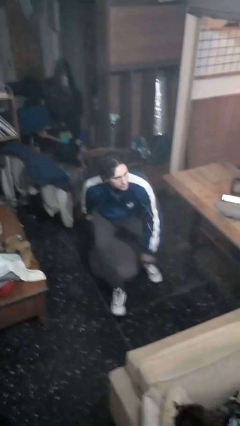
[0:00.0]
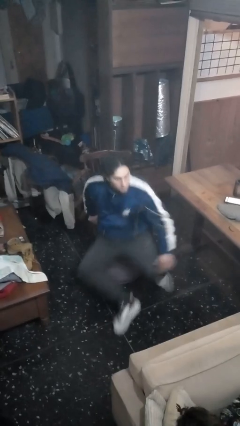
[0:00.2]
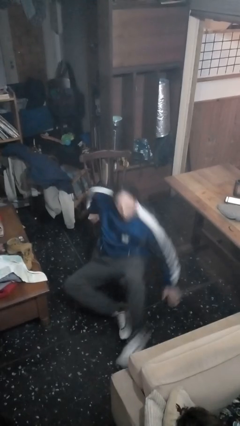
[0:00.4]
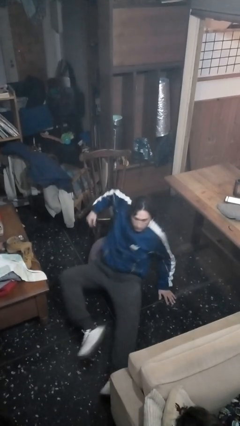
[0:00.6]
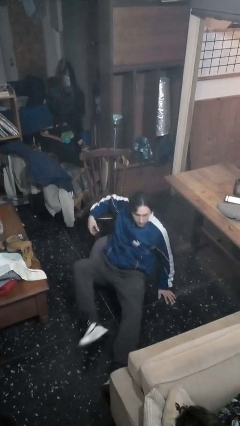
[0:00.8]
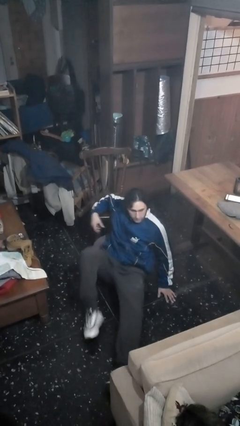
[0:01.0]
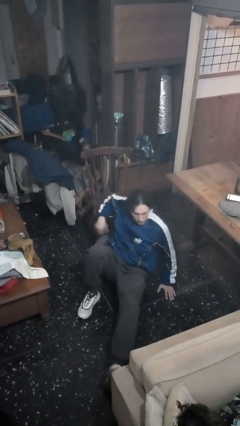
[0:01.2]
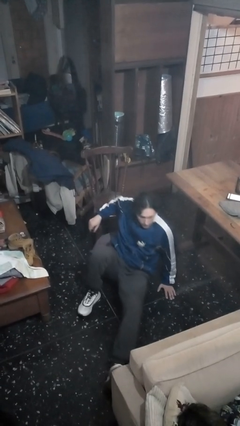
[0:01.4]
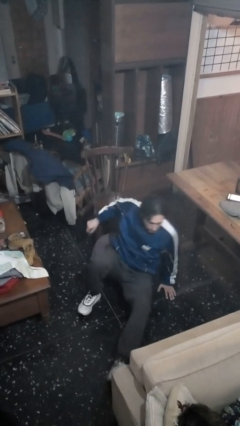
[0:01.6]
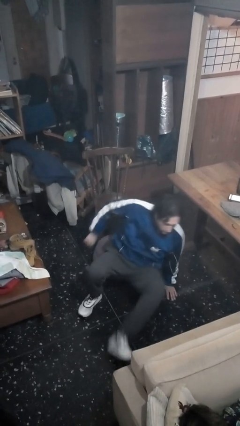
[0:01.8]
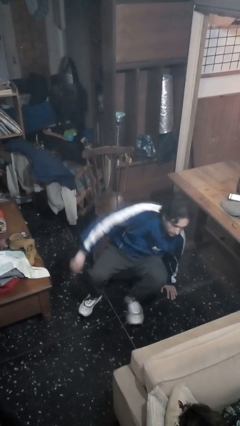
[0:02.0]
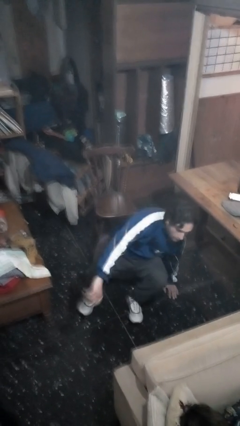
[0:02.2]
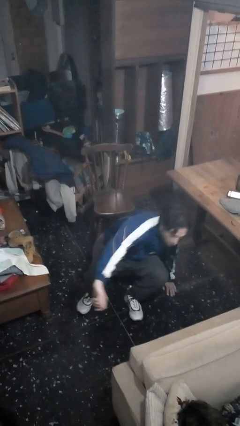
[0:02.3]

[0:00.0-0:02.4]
person falls from chair

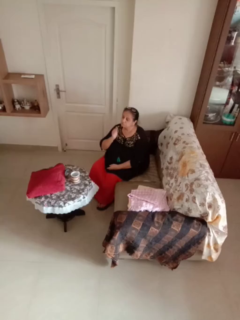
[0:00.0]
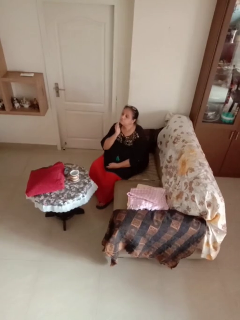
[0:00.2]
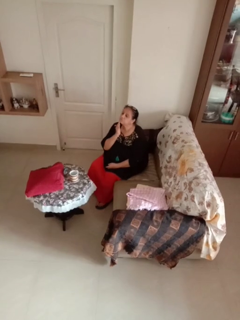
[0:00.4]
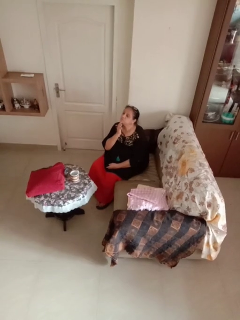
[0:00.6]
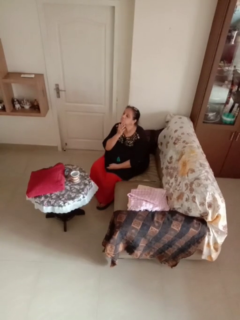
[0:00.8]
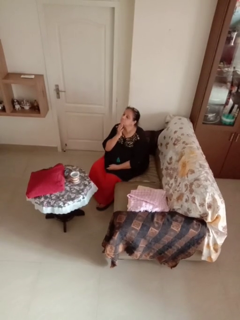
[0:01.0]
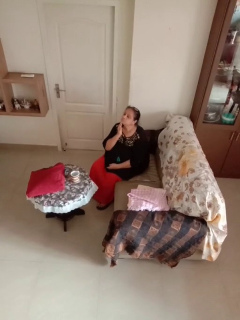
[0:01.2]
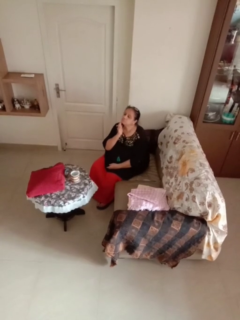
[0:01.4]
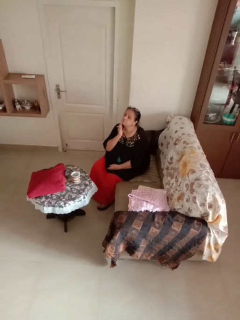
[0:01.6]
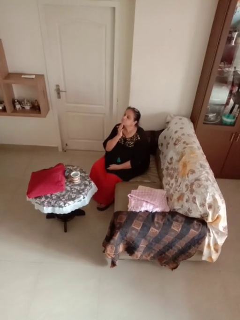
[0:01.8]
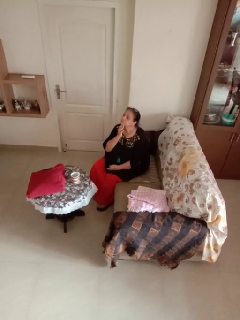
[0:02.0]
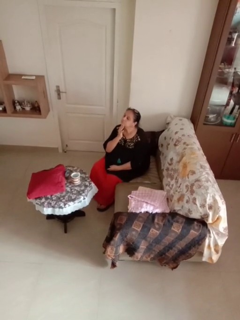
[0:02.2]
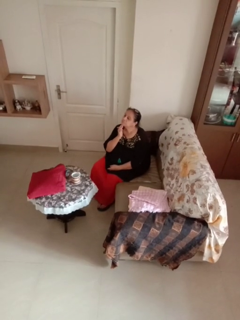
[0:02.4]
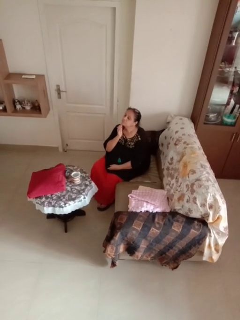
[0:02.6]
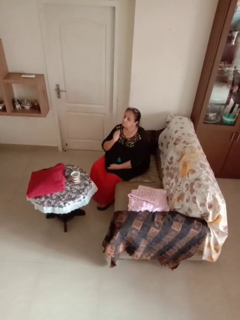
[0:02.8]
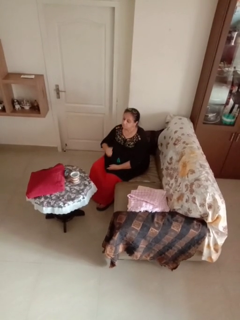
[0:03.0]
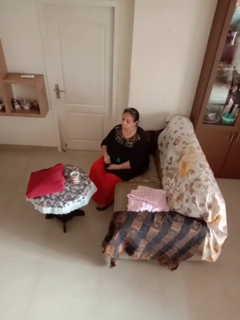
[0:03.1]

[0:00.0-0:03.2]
person strokes chin

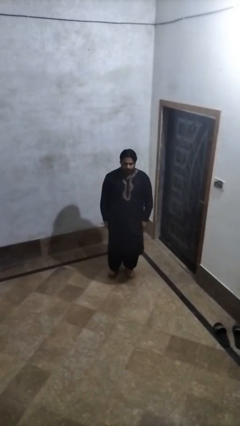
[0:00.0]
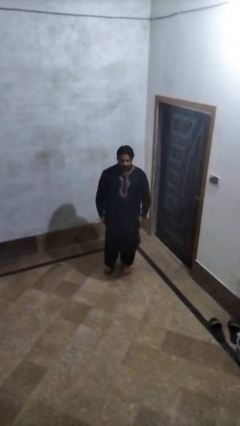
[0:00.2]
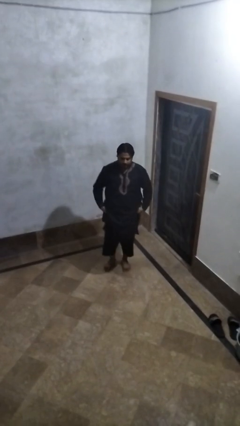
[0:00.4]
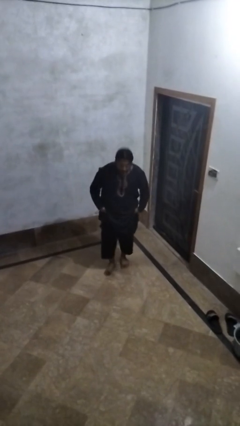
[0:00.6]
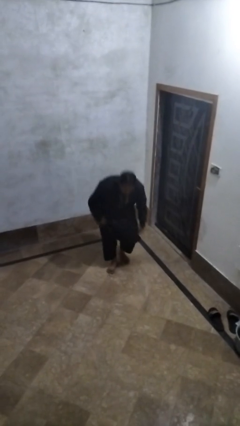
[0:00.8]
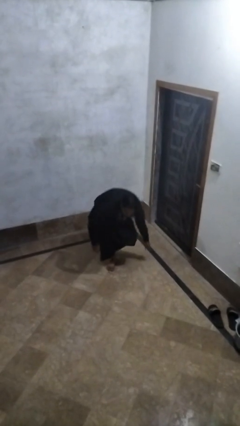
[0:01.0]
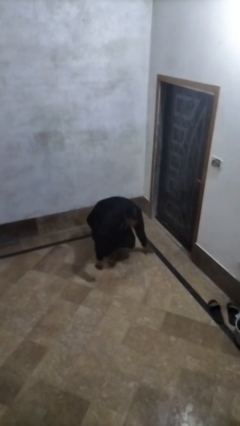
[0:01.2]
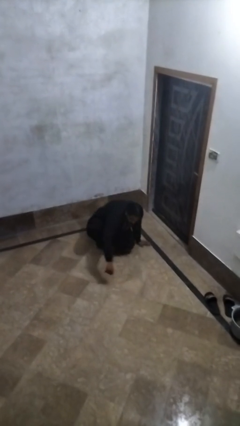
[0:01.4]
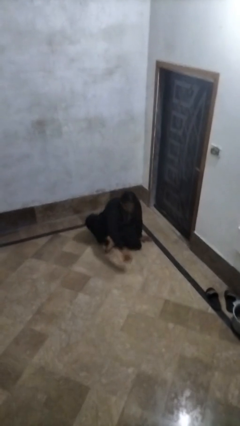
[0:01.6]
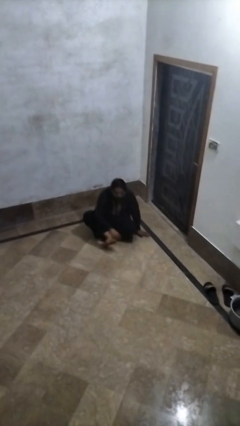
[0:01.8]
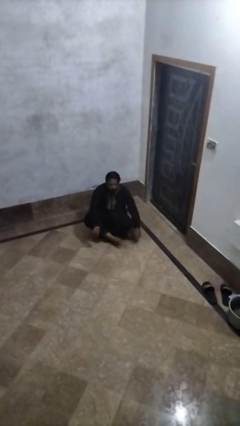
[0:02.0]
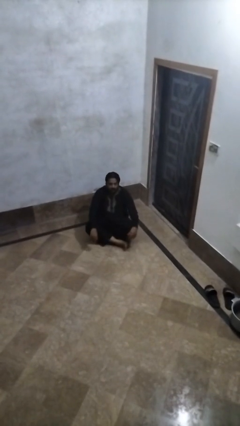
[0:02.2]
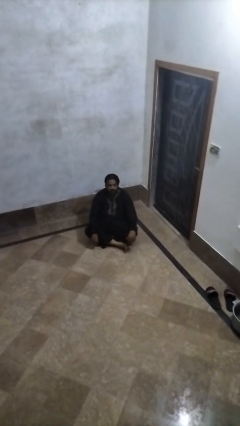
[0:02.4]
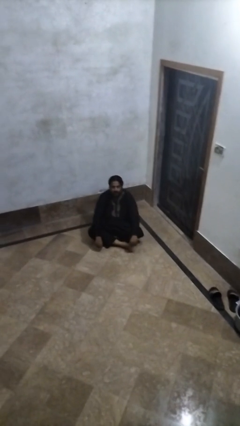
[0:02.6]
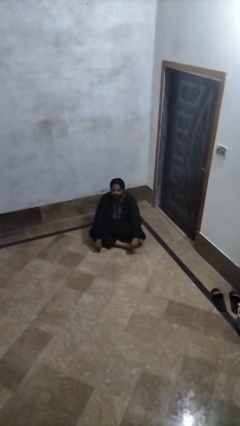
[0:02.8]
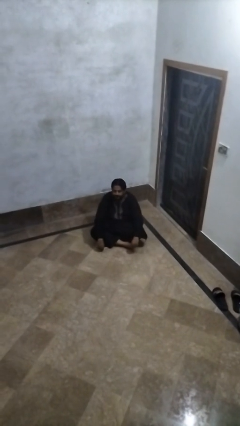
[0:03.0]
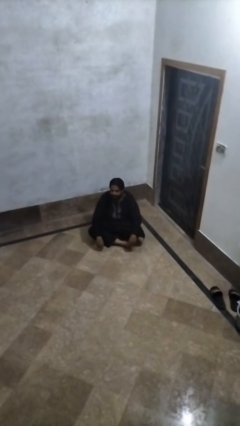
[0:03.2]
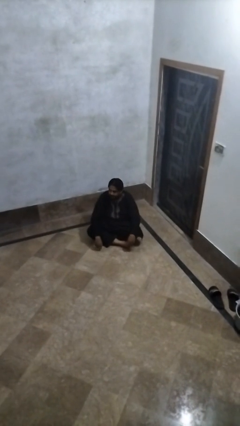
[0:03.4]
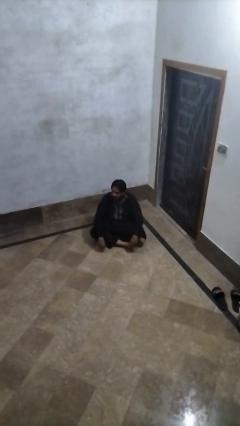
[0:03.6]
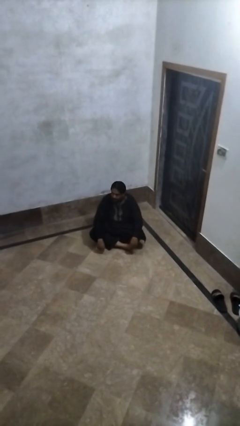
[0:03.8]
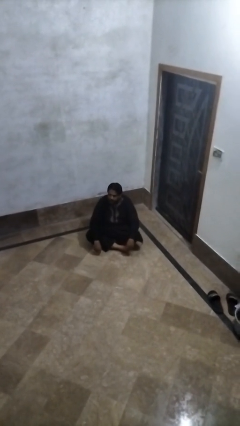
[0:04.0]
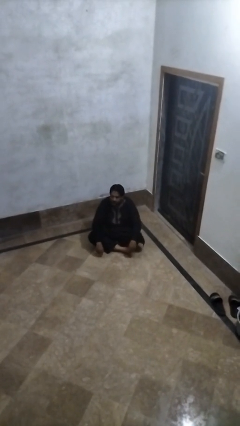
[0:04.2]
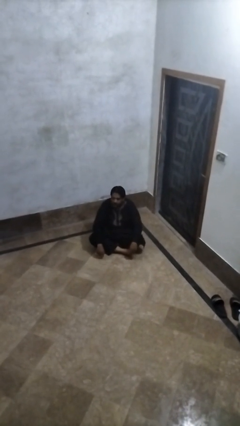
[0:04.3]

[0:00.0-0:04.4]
person sits crisscross

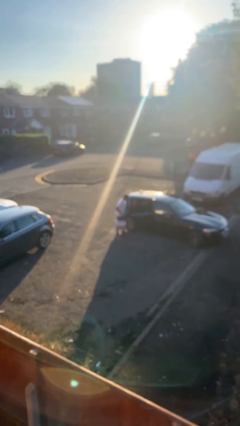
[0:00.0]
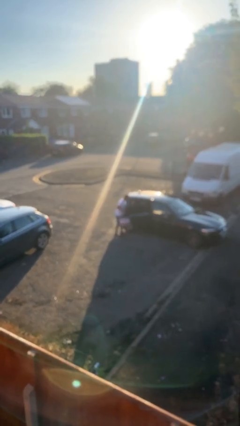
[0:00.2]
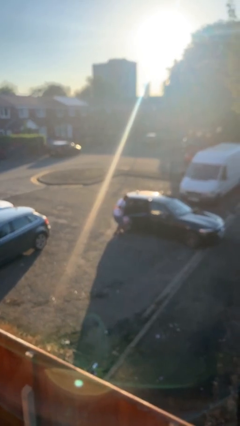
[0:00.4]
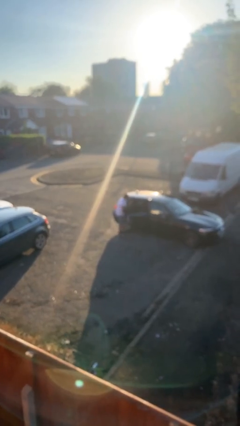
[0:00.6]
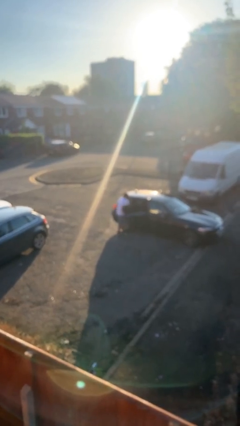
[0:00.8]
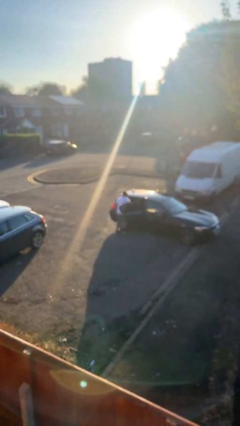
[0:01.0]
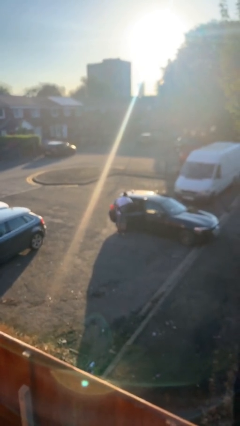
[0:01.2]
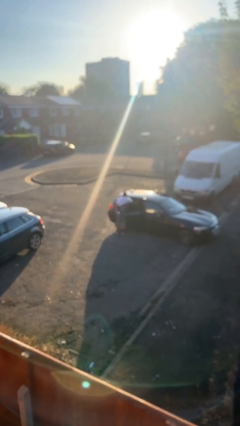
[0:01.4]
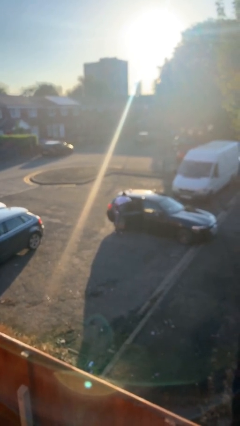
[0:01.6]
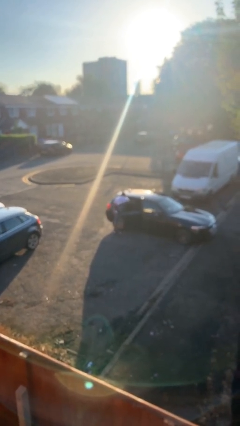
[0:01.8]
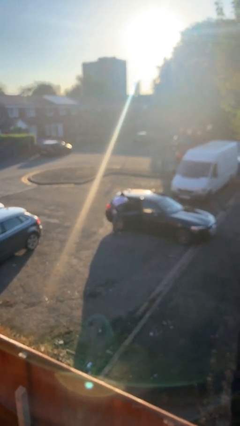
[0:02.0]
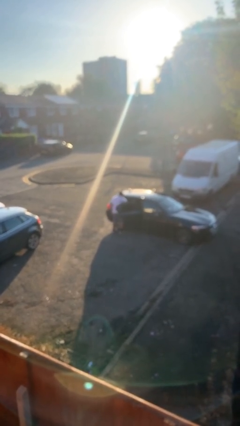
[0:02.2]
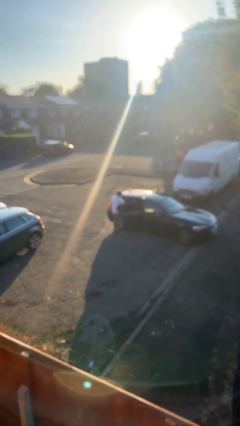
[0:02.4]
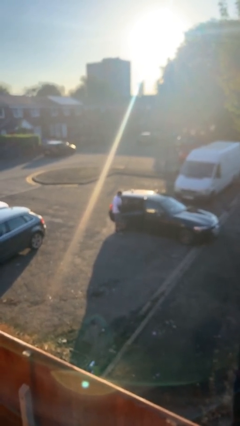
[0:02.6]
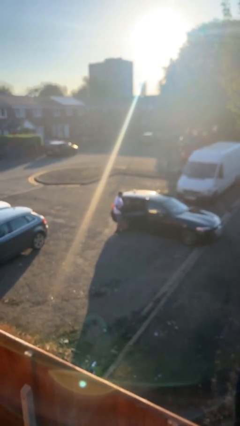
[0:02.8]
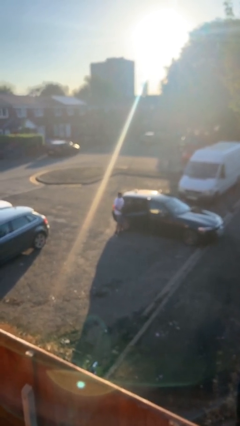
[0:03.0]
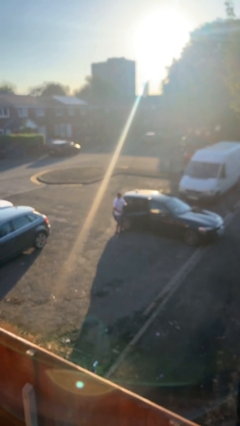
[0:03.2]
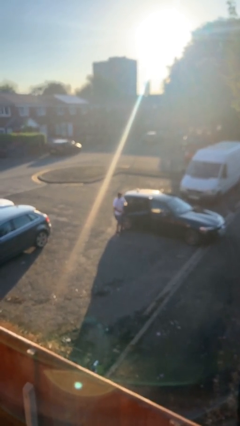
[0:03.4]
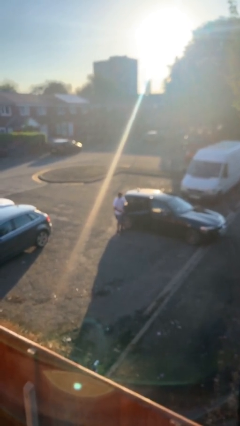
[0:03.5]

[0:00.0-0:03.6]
person loads car

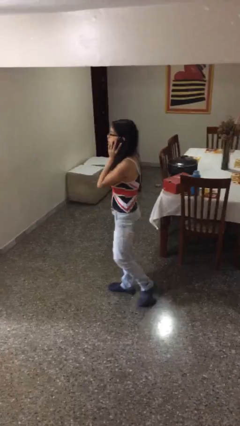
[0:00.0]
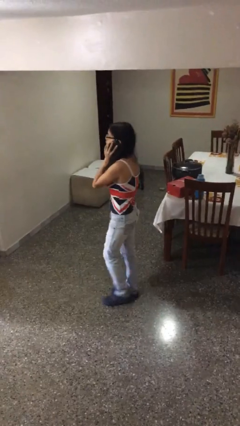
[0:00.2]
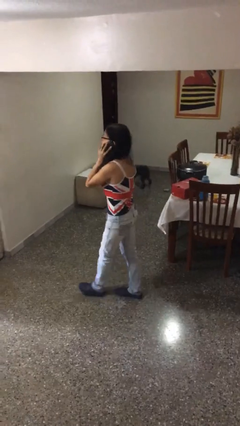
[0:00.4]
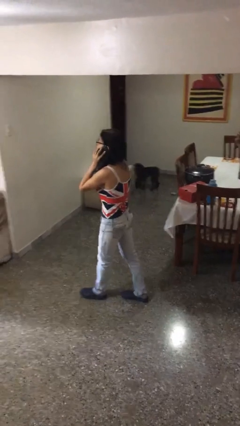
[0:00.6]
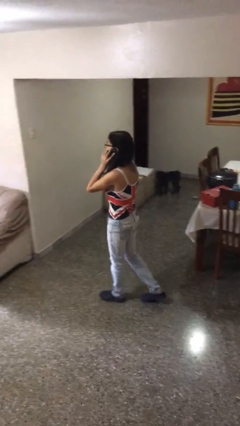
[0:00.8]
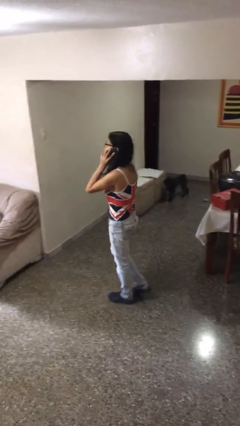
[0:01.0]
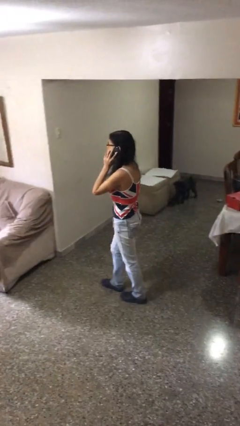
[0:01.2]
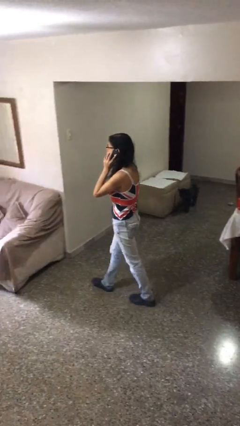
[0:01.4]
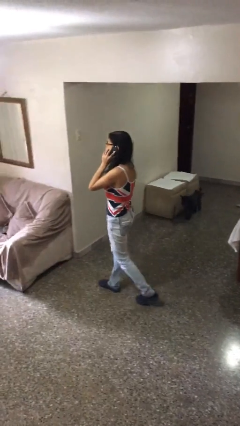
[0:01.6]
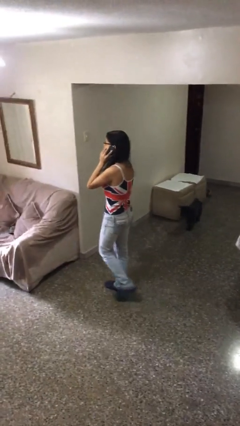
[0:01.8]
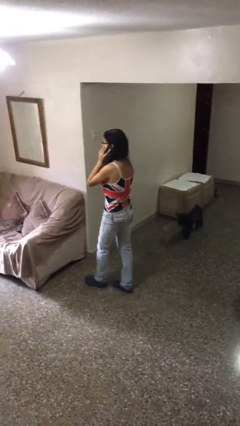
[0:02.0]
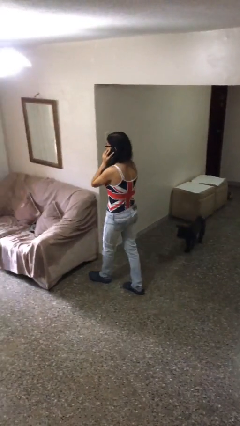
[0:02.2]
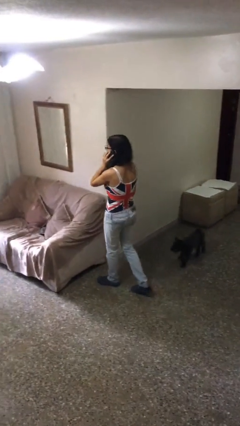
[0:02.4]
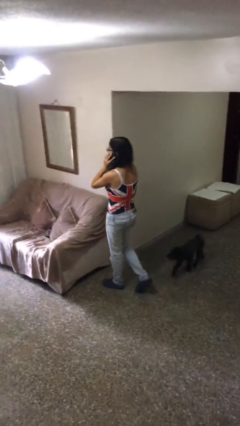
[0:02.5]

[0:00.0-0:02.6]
person talks on phone

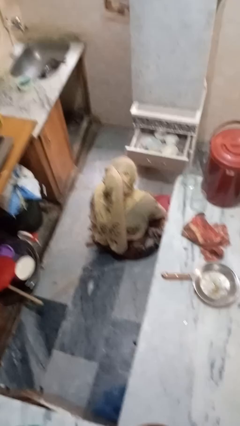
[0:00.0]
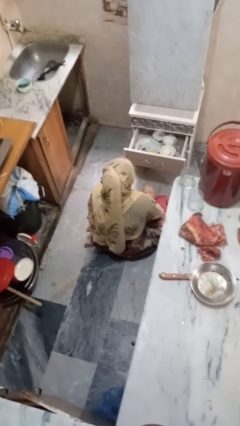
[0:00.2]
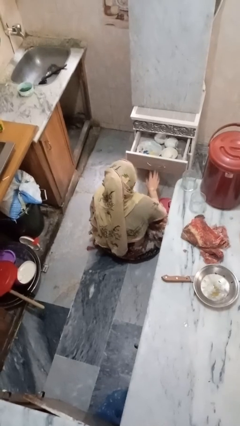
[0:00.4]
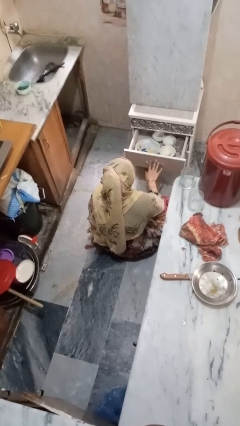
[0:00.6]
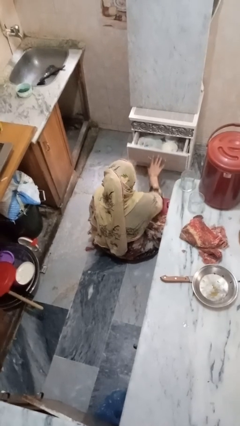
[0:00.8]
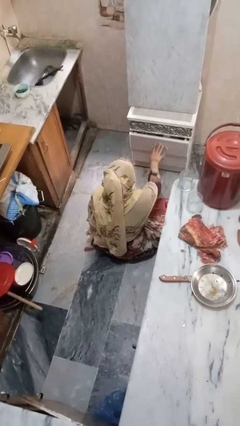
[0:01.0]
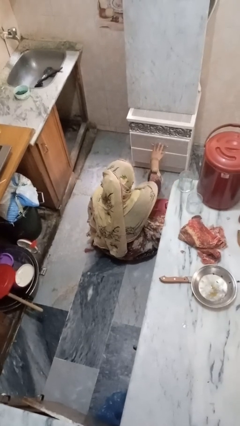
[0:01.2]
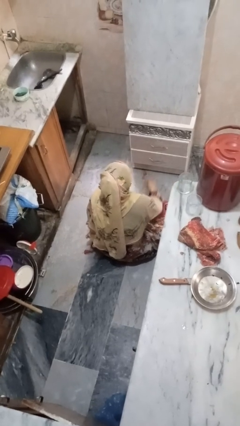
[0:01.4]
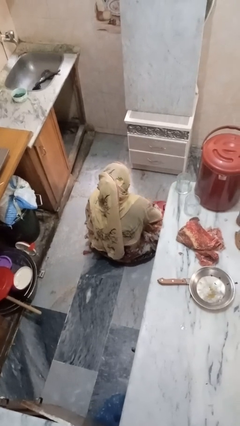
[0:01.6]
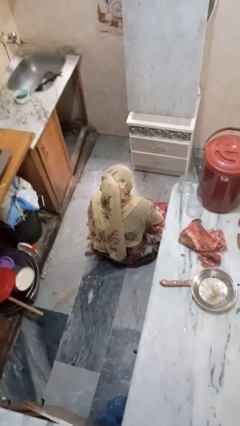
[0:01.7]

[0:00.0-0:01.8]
person closes kitchen drawer

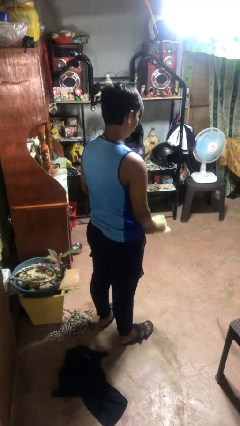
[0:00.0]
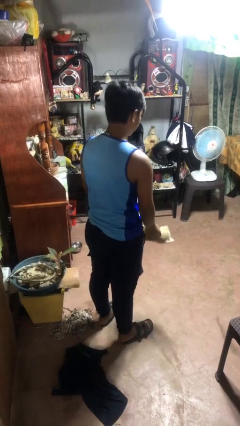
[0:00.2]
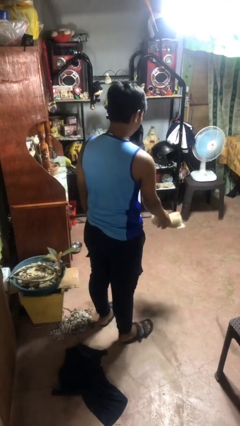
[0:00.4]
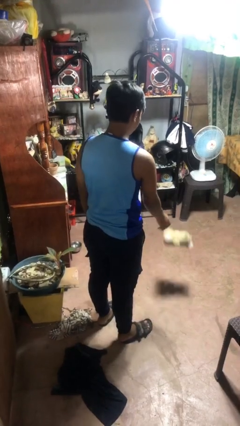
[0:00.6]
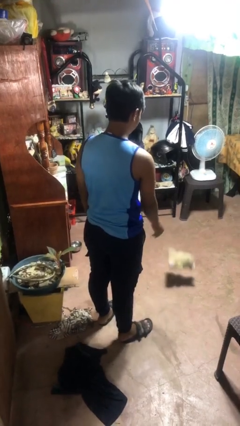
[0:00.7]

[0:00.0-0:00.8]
person throws object to ground
